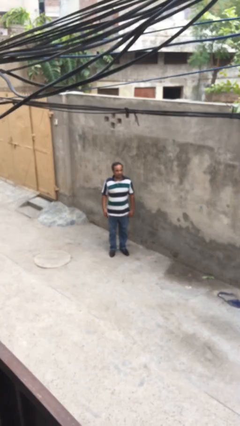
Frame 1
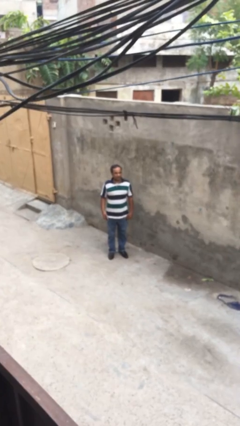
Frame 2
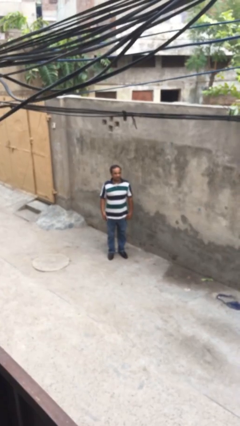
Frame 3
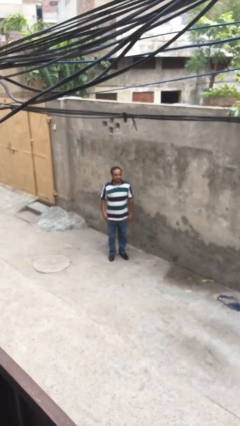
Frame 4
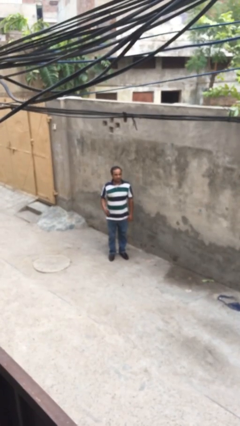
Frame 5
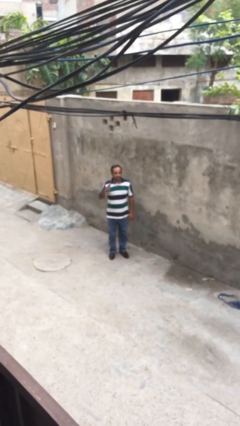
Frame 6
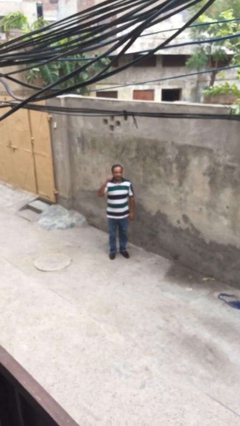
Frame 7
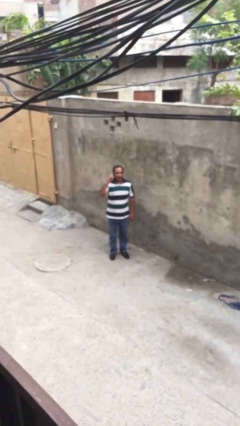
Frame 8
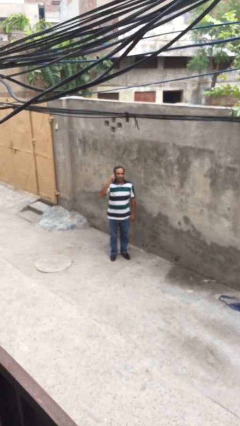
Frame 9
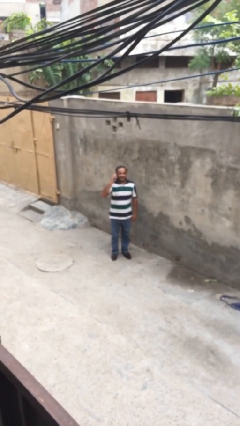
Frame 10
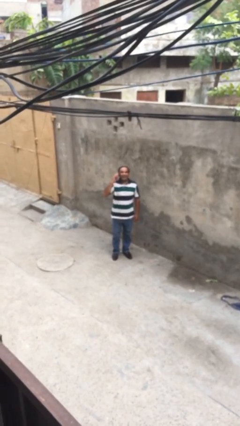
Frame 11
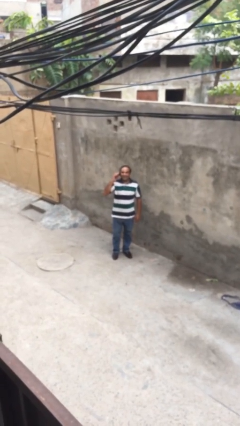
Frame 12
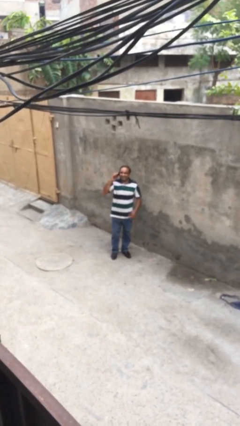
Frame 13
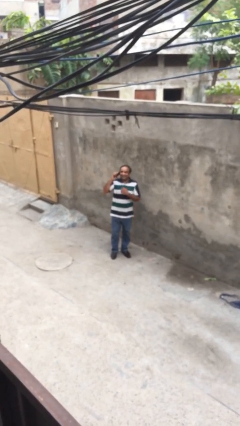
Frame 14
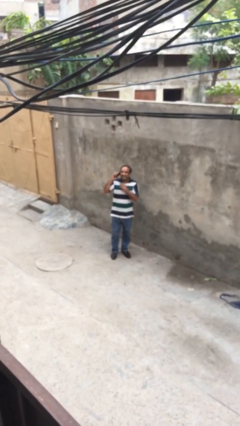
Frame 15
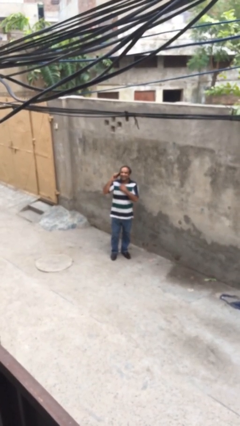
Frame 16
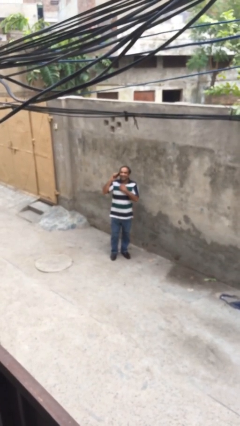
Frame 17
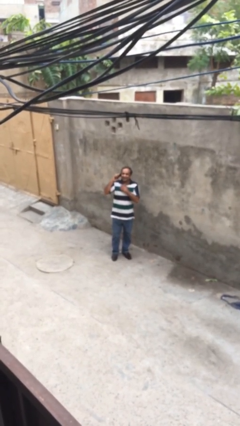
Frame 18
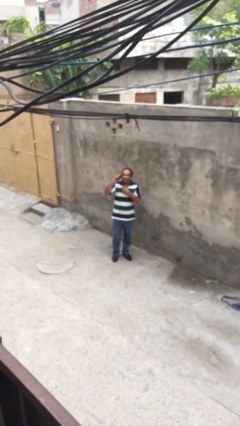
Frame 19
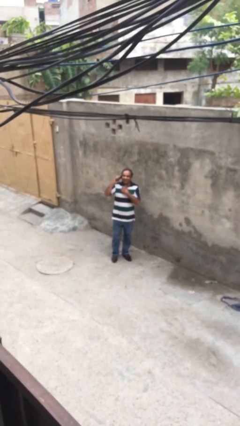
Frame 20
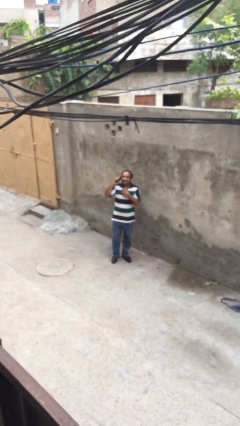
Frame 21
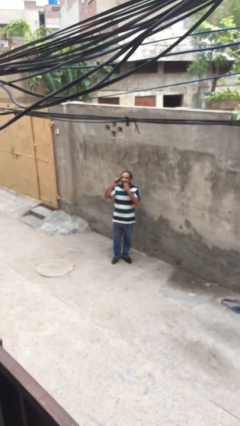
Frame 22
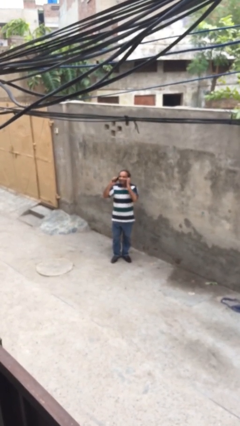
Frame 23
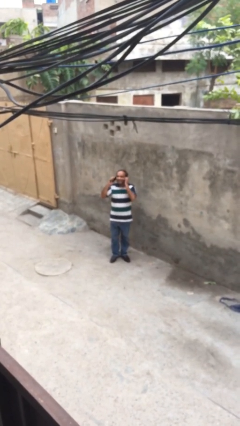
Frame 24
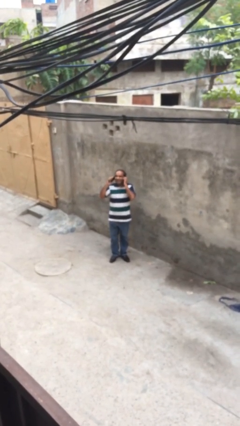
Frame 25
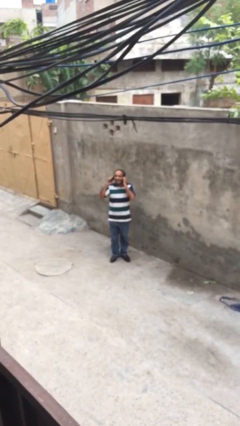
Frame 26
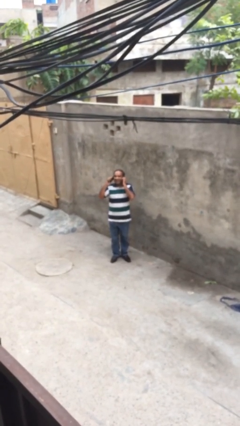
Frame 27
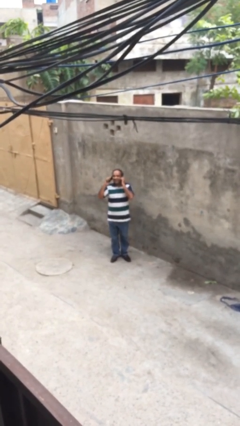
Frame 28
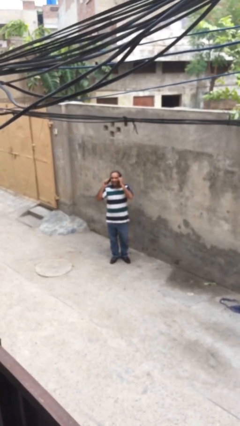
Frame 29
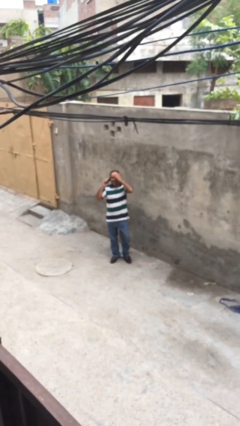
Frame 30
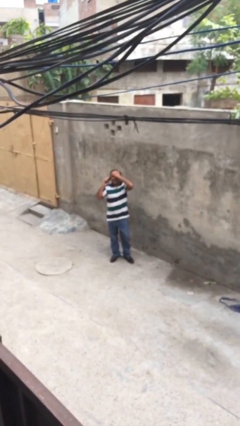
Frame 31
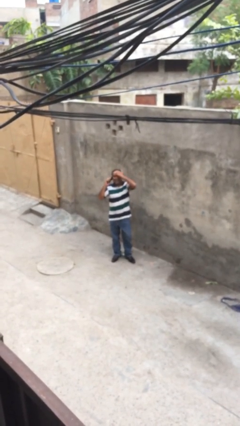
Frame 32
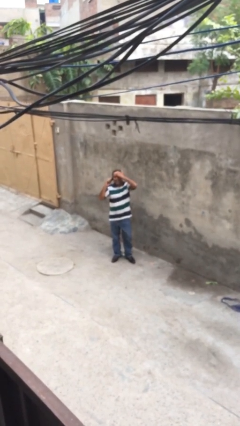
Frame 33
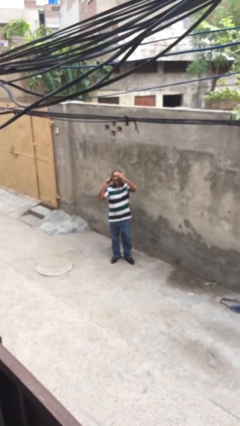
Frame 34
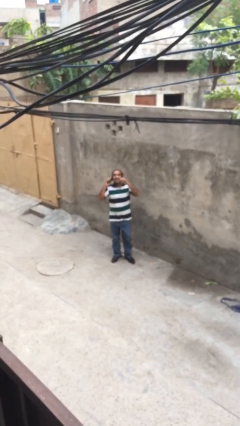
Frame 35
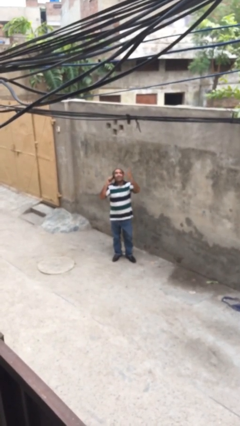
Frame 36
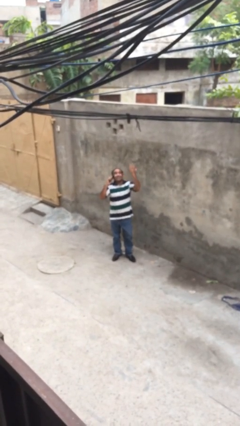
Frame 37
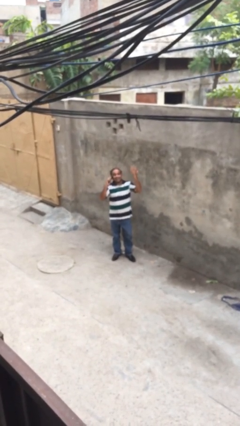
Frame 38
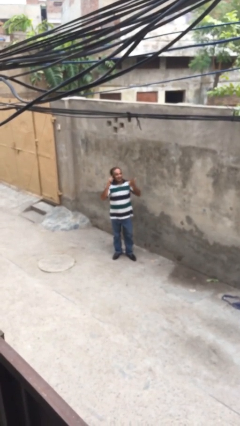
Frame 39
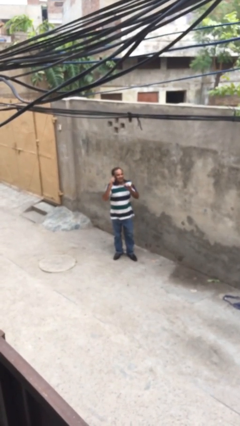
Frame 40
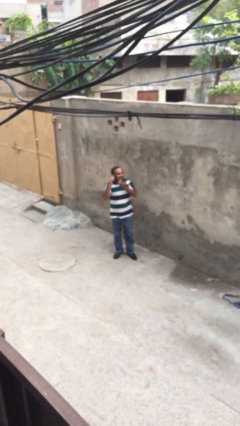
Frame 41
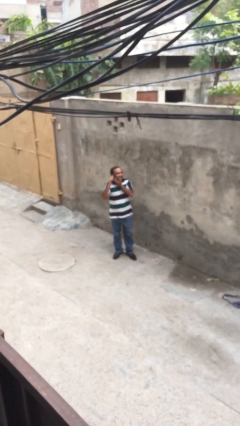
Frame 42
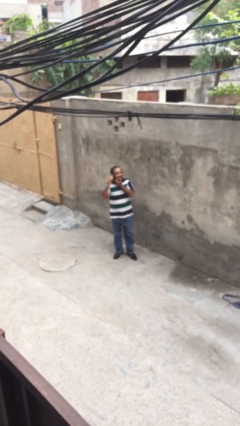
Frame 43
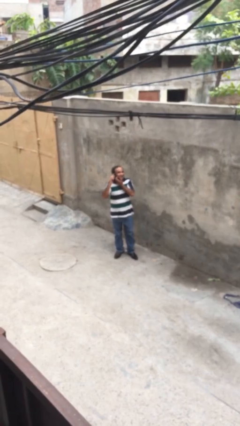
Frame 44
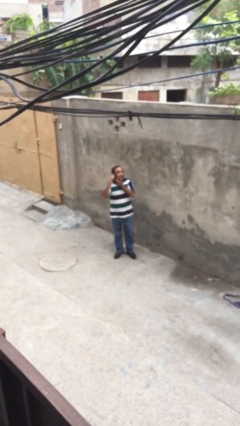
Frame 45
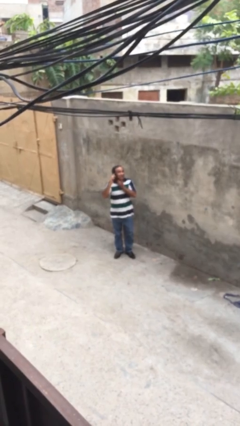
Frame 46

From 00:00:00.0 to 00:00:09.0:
person talks on phone

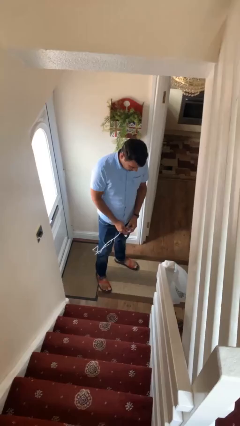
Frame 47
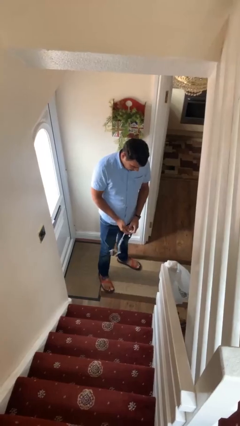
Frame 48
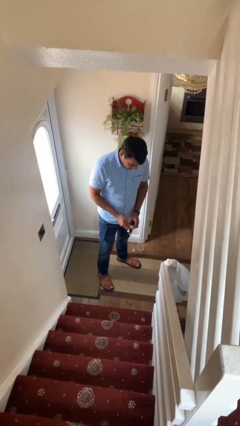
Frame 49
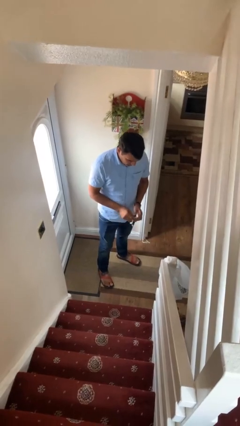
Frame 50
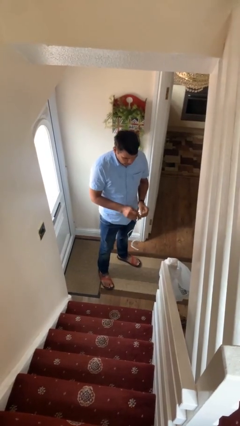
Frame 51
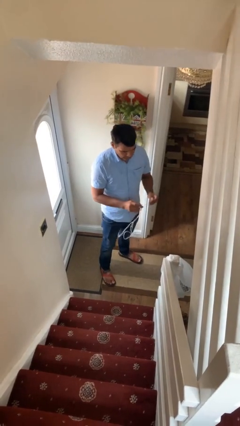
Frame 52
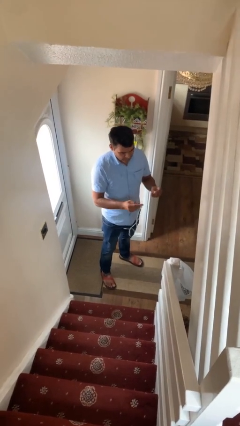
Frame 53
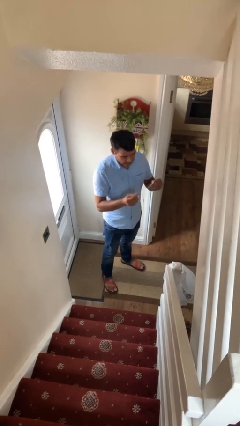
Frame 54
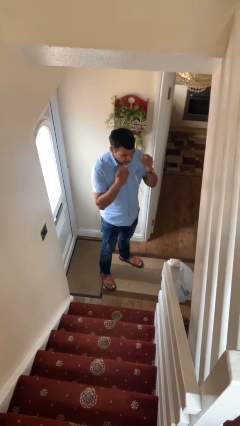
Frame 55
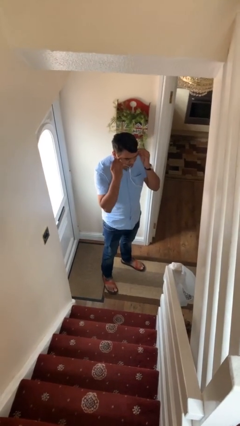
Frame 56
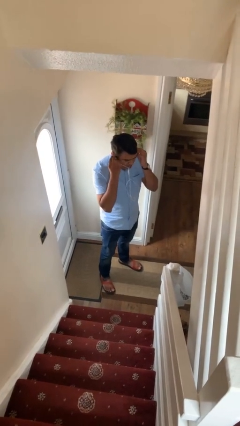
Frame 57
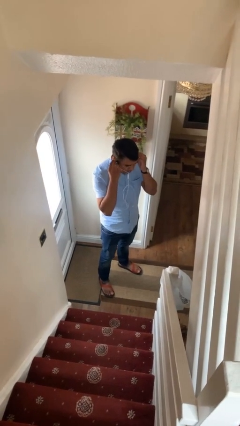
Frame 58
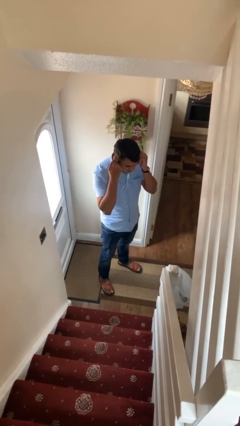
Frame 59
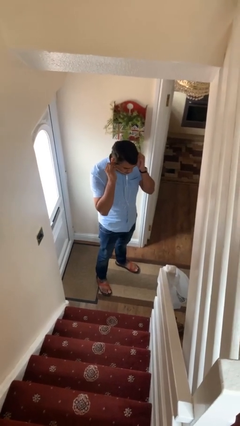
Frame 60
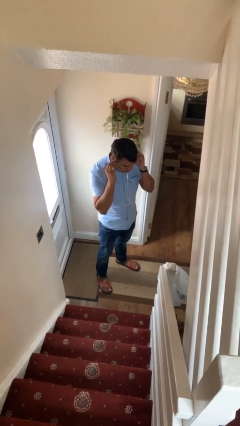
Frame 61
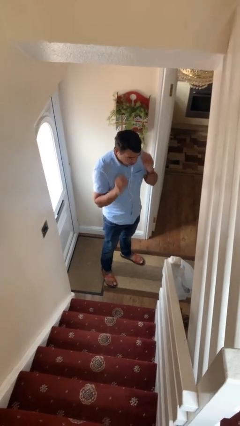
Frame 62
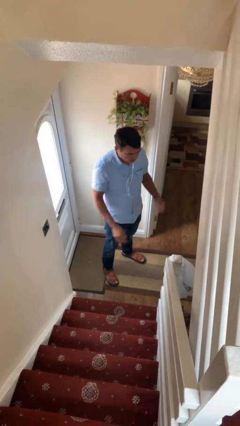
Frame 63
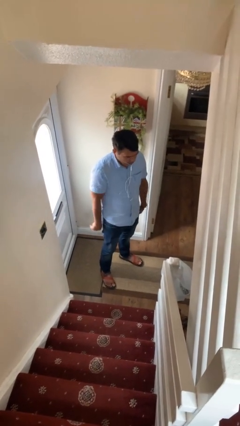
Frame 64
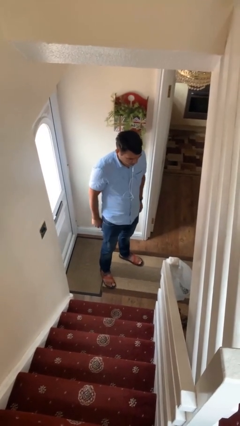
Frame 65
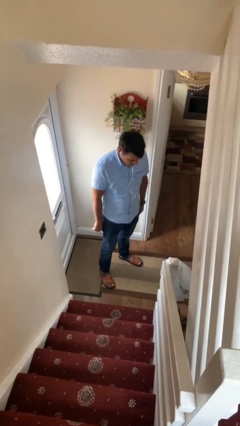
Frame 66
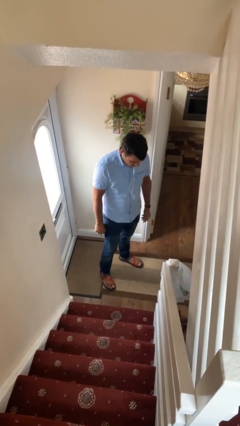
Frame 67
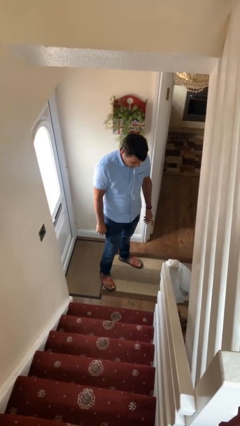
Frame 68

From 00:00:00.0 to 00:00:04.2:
person puts on headphones

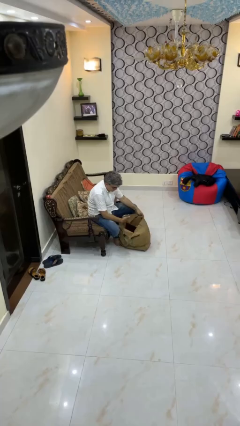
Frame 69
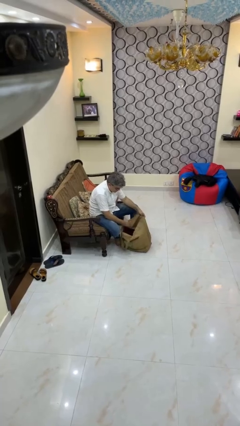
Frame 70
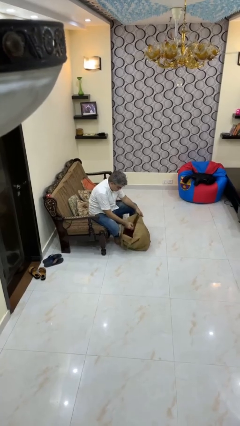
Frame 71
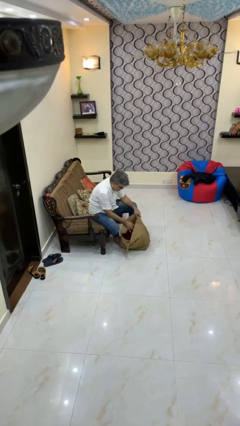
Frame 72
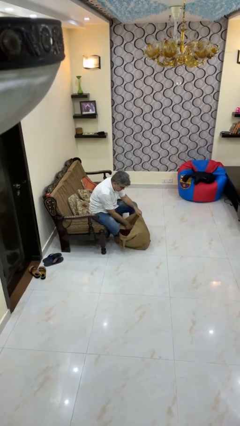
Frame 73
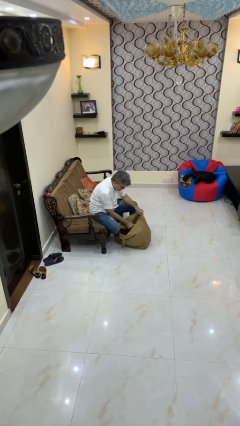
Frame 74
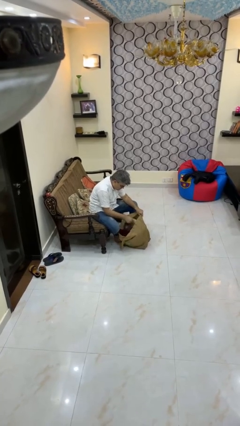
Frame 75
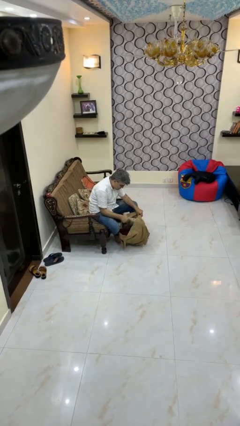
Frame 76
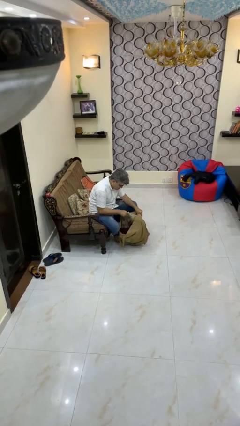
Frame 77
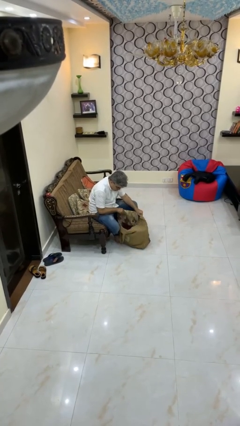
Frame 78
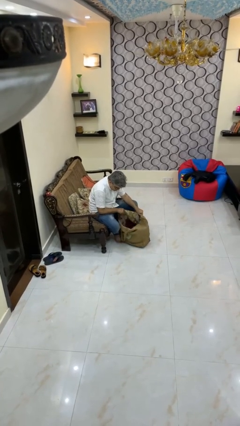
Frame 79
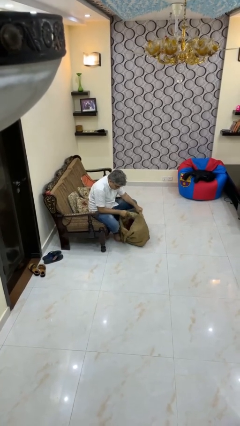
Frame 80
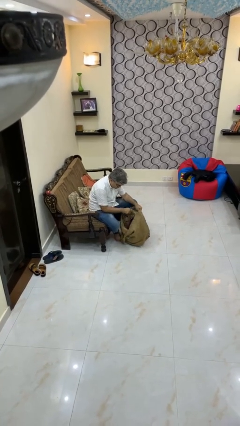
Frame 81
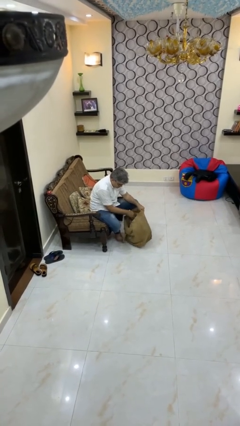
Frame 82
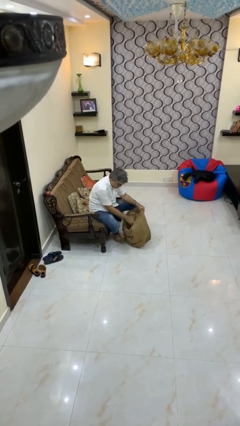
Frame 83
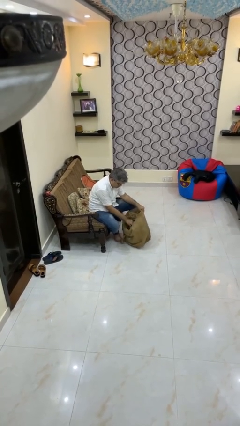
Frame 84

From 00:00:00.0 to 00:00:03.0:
person searches in bag

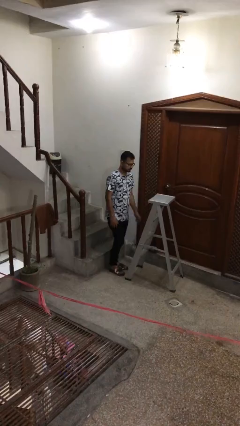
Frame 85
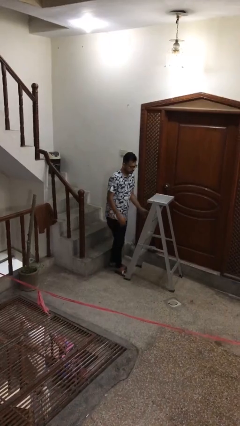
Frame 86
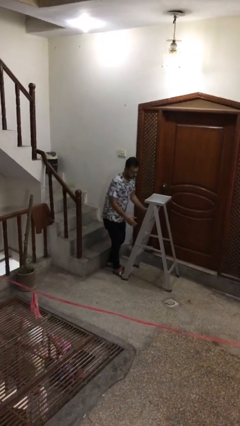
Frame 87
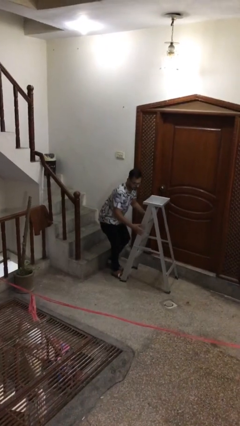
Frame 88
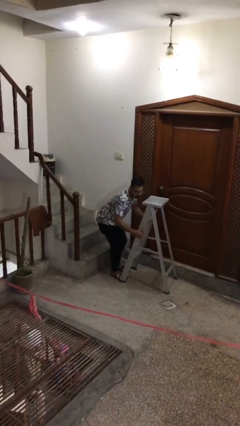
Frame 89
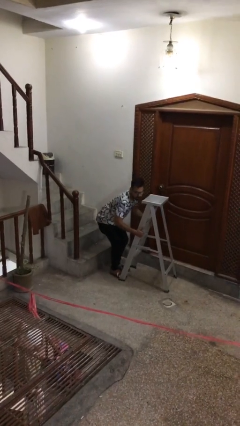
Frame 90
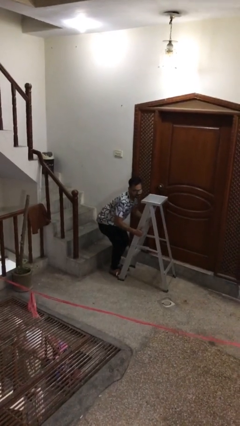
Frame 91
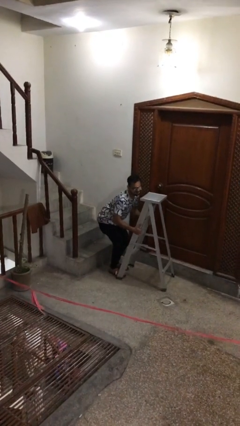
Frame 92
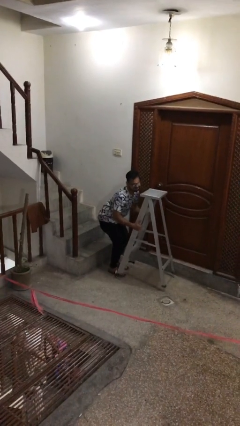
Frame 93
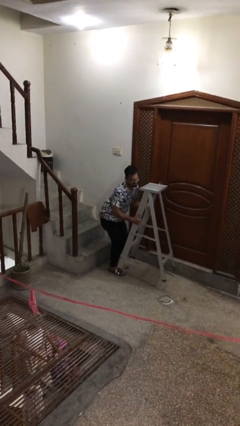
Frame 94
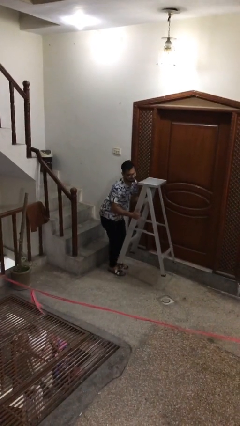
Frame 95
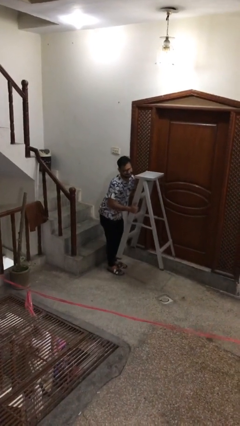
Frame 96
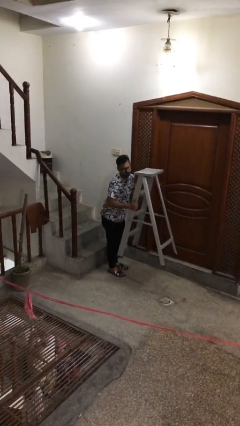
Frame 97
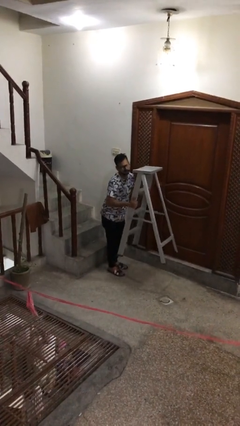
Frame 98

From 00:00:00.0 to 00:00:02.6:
person picks up object from floor
